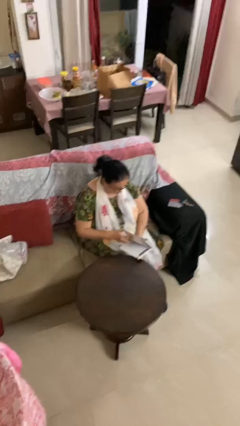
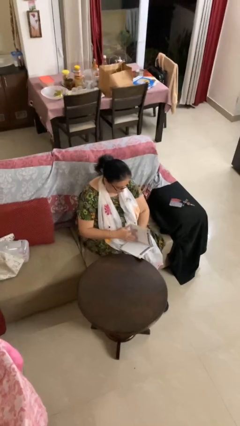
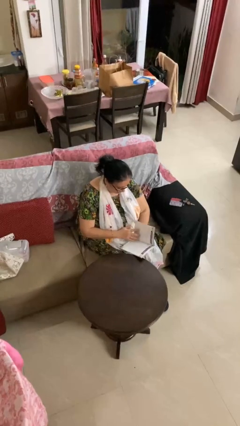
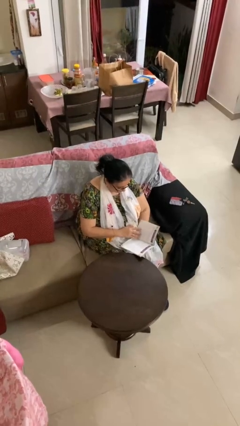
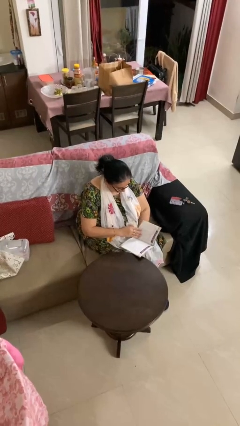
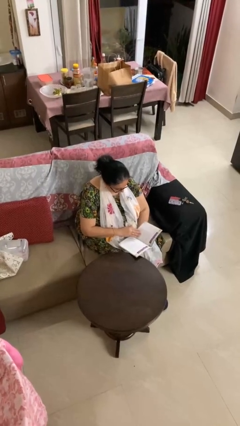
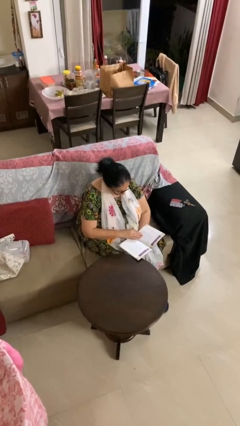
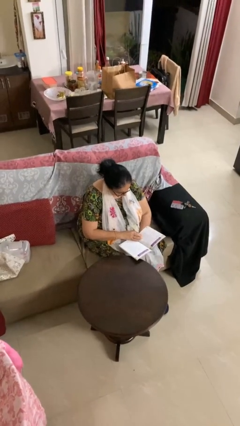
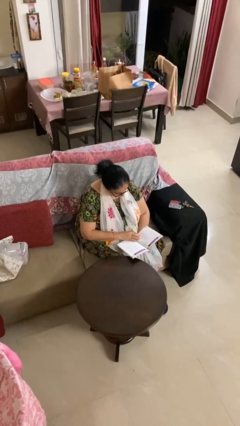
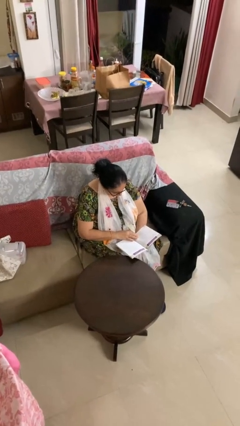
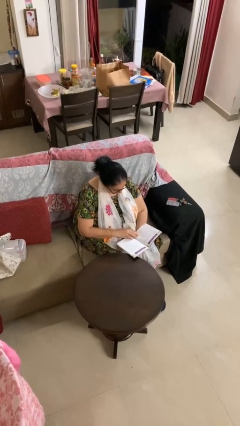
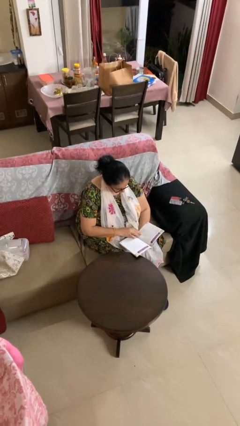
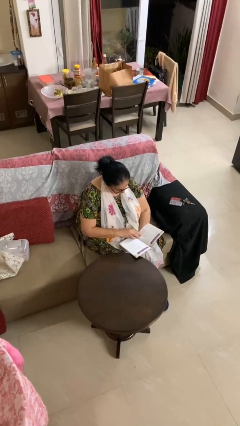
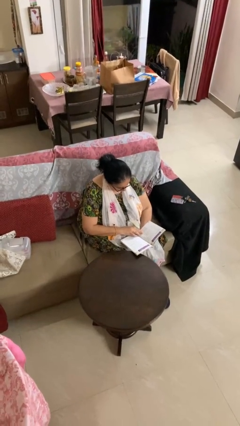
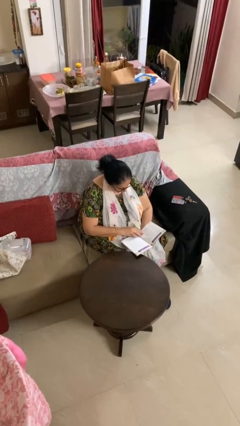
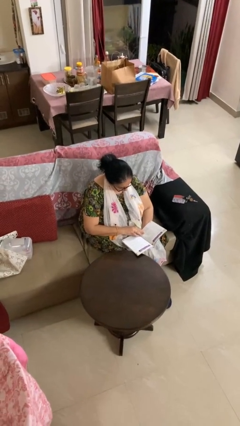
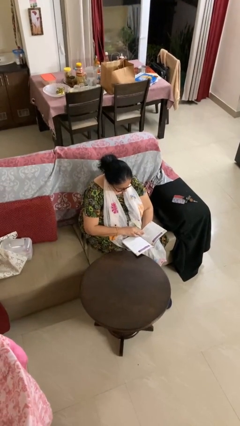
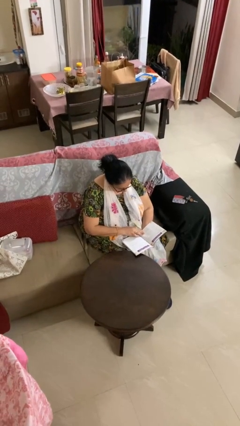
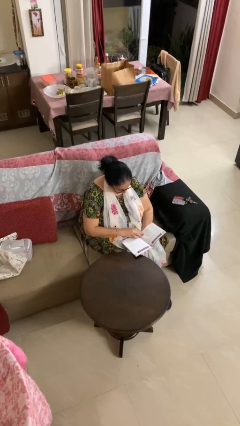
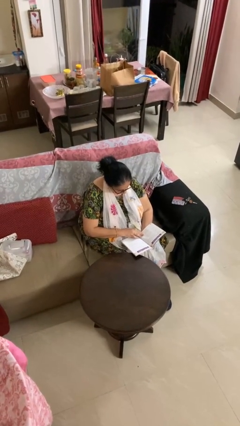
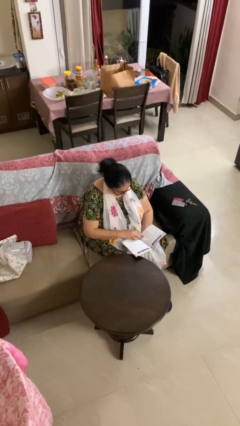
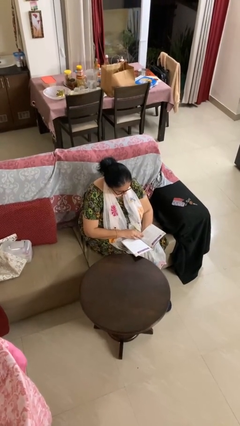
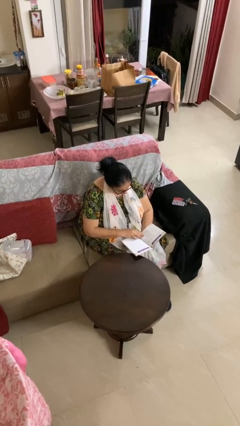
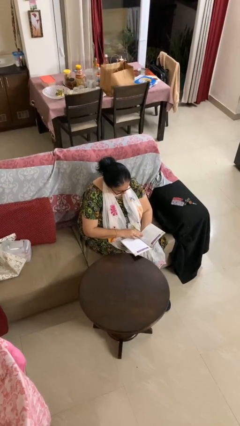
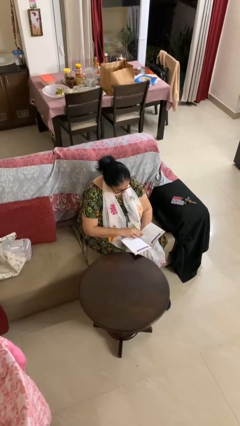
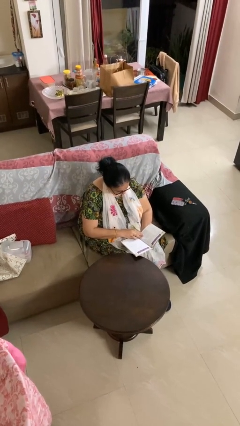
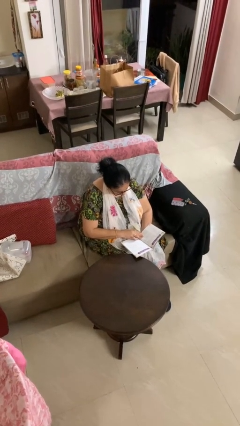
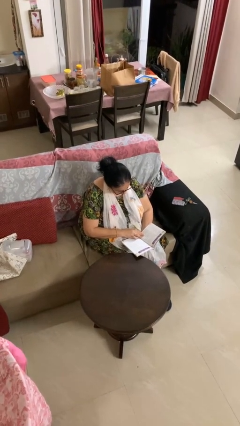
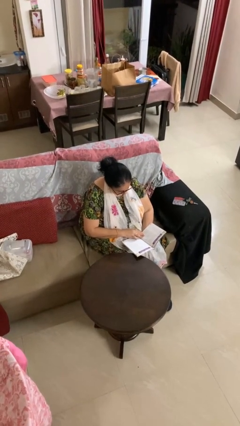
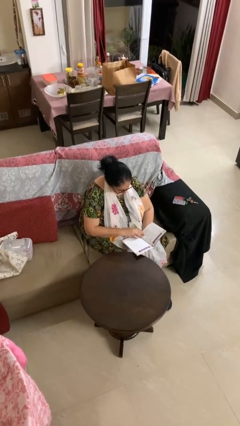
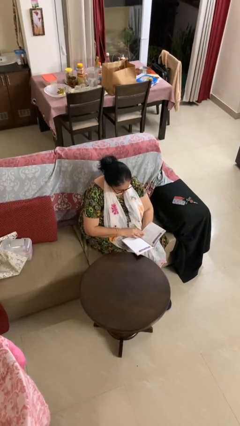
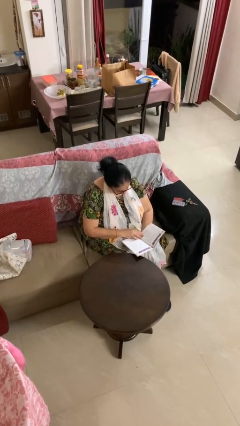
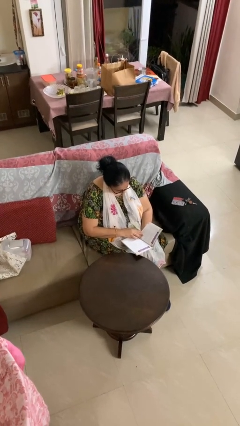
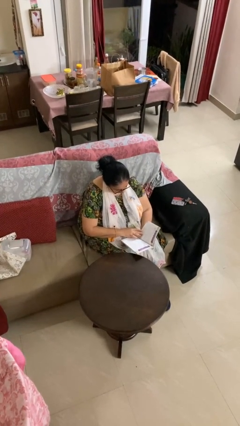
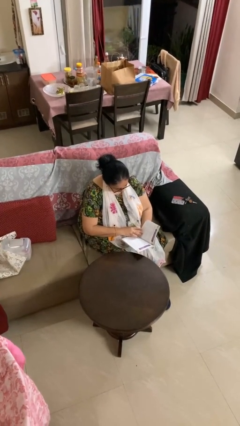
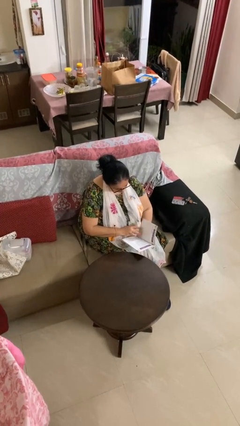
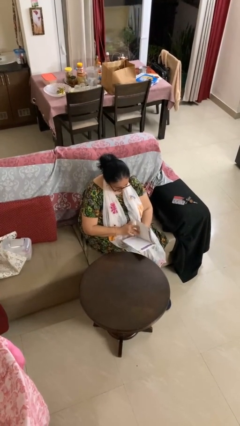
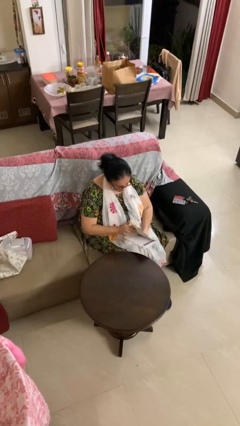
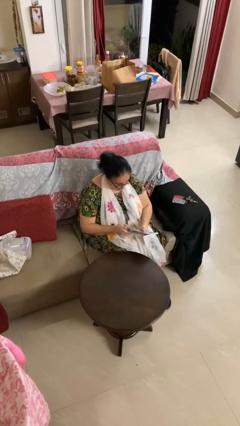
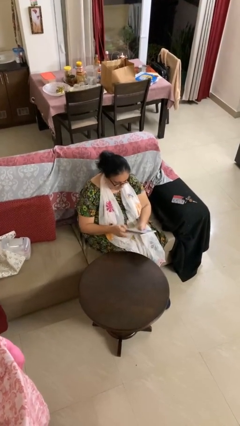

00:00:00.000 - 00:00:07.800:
person reads document

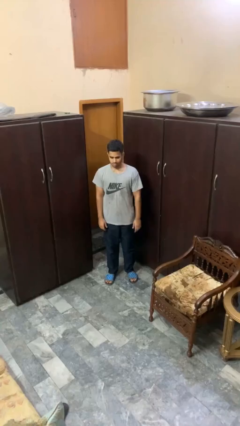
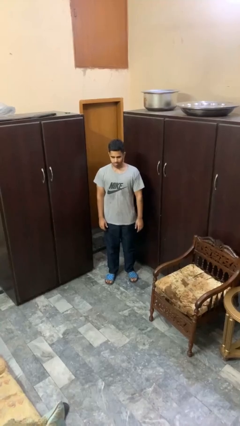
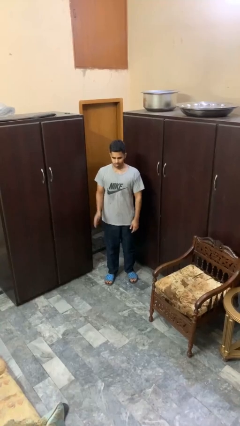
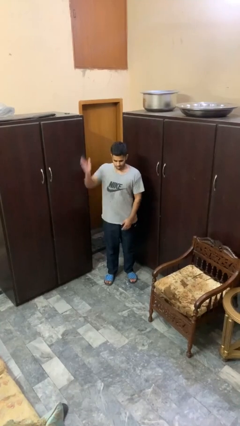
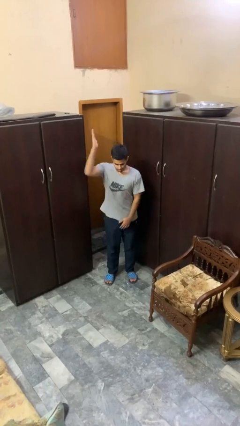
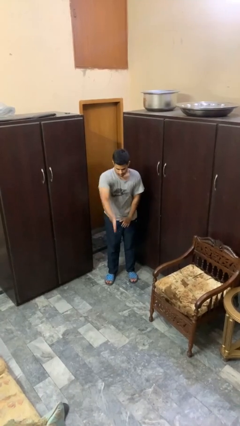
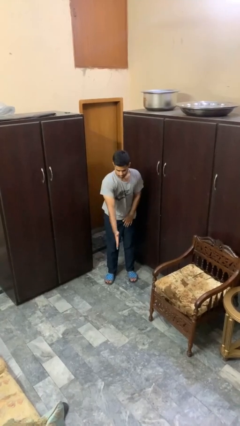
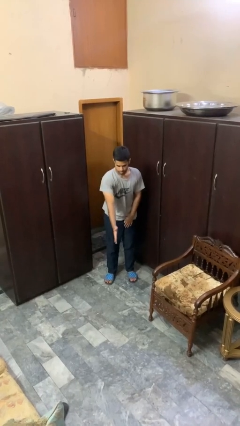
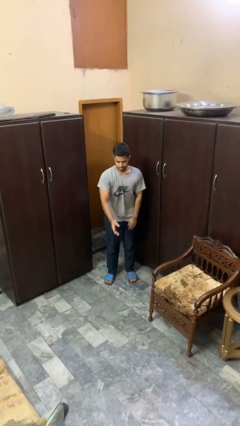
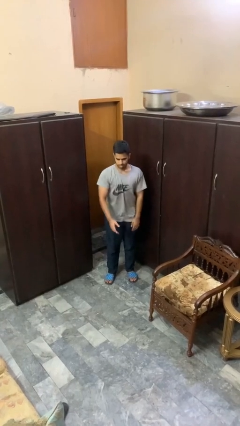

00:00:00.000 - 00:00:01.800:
person karate chop

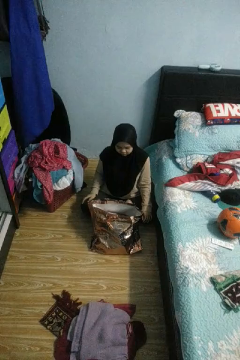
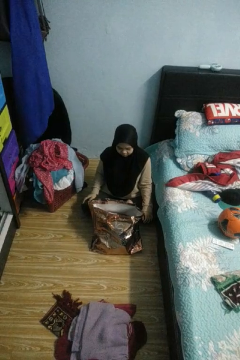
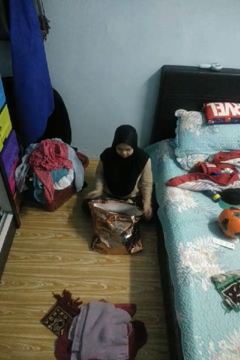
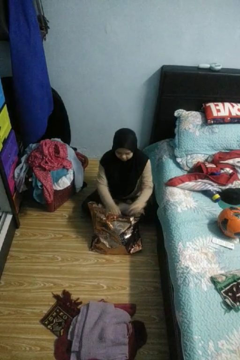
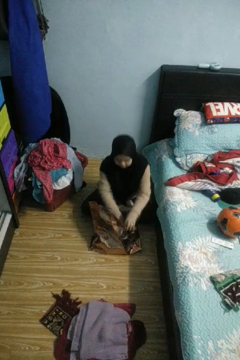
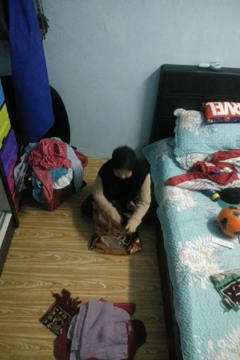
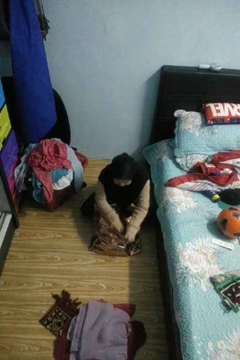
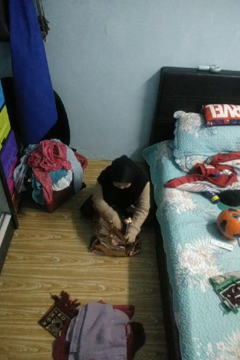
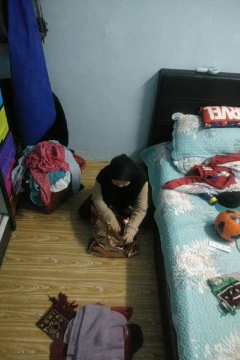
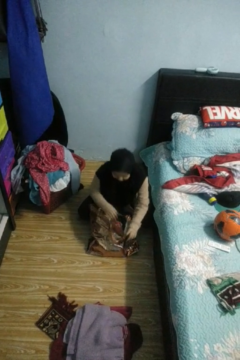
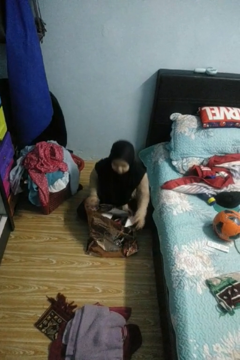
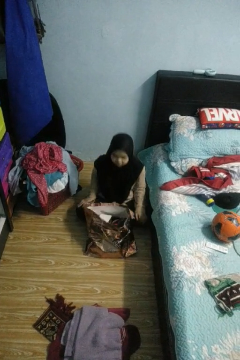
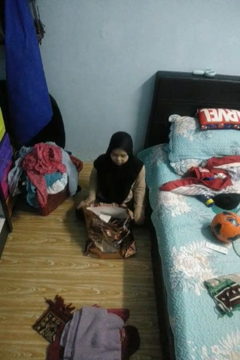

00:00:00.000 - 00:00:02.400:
person searches in bag

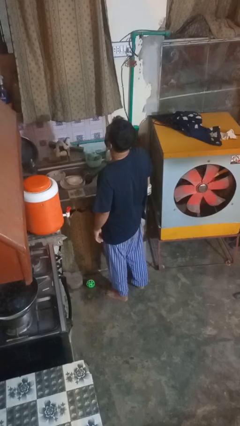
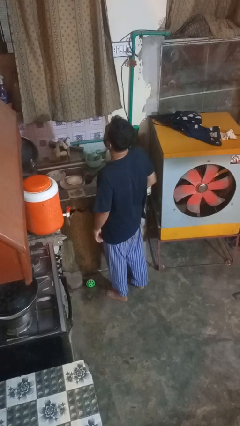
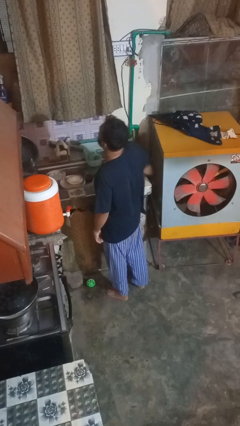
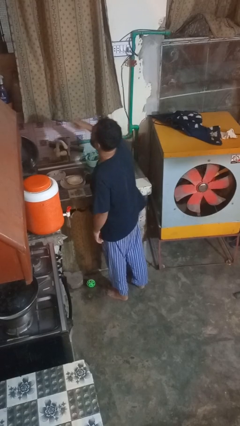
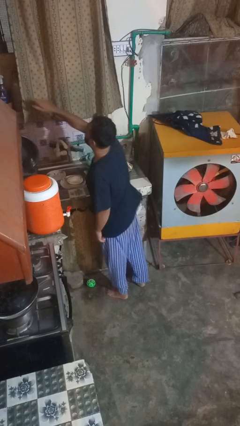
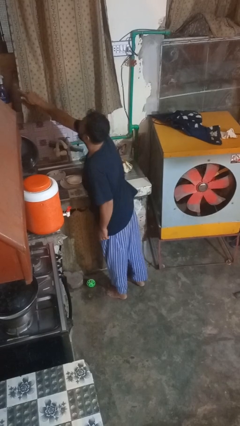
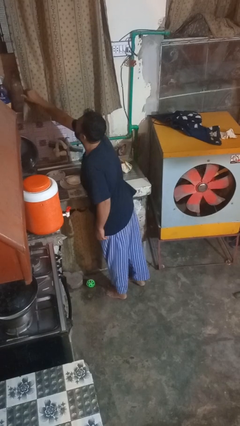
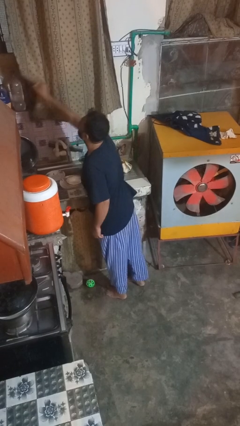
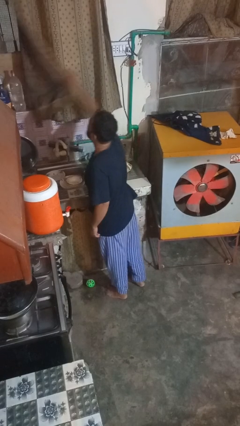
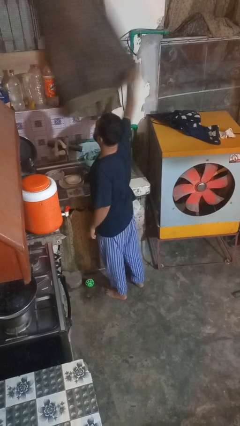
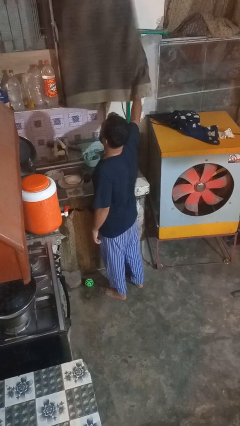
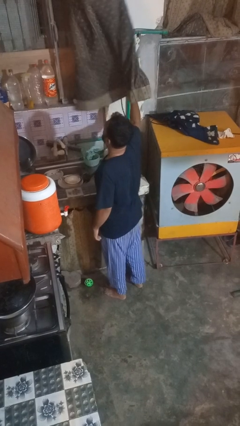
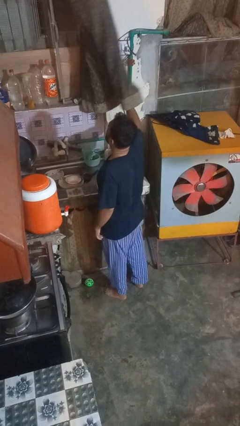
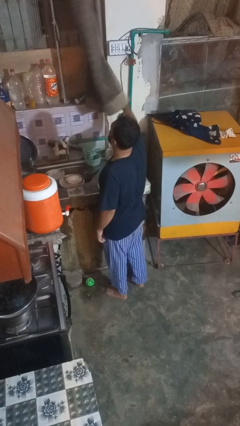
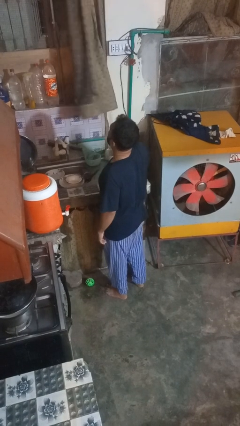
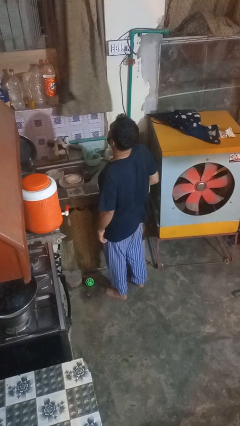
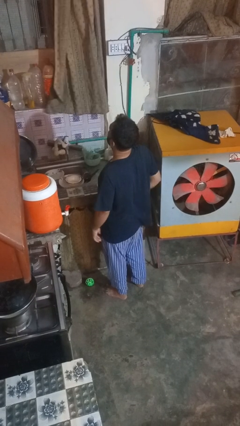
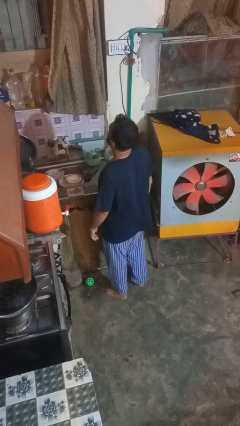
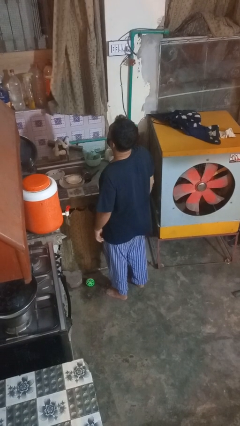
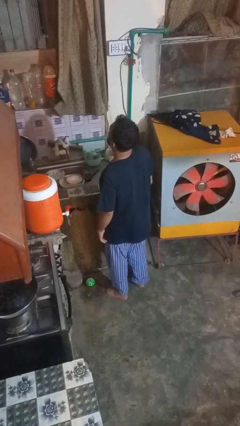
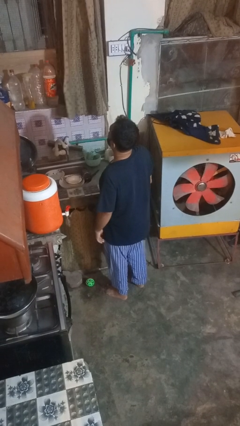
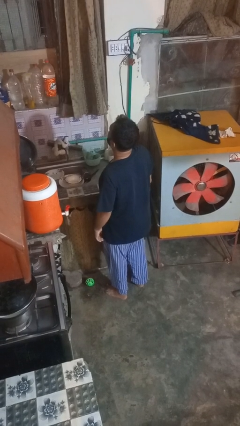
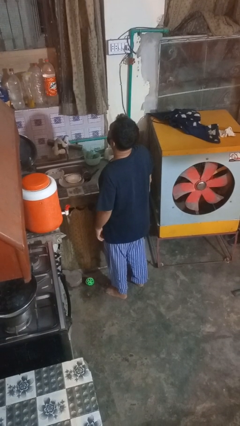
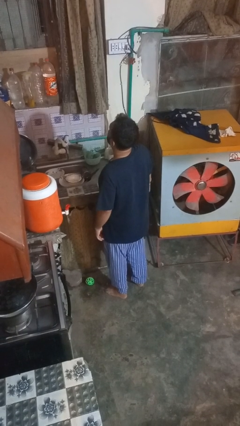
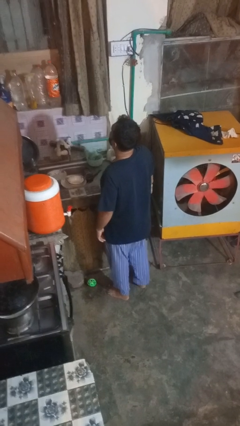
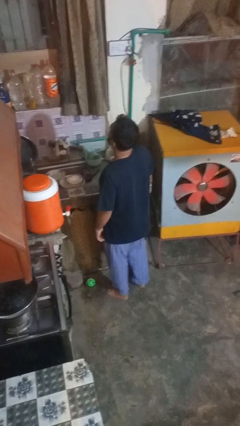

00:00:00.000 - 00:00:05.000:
person opens curtains

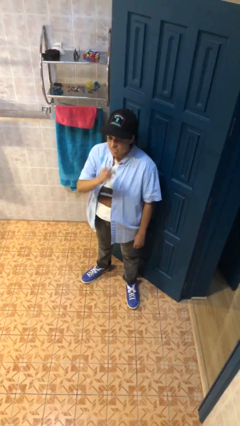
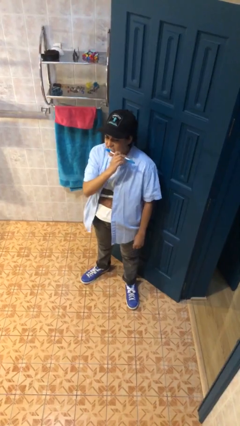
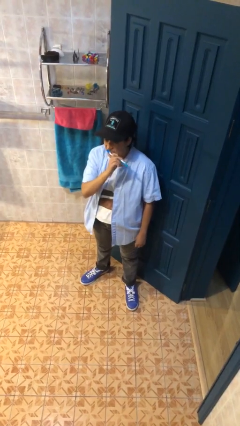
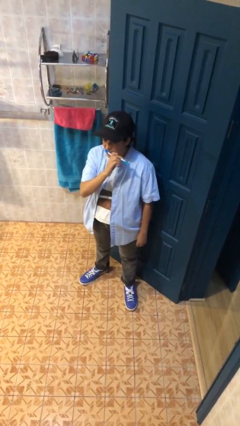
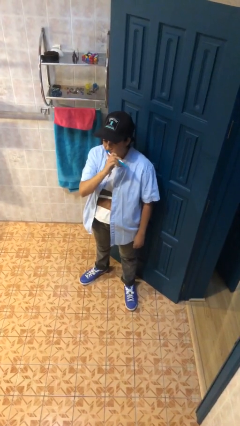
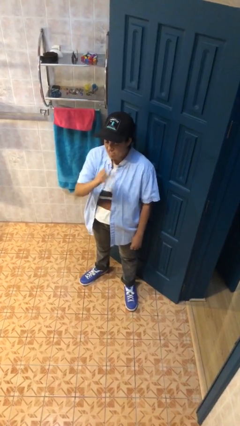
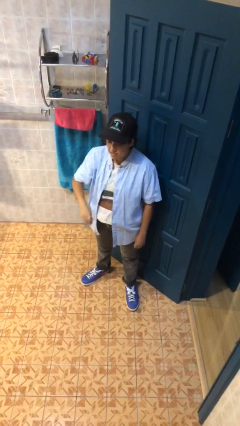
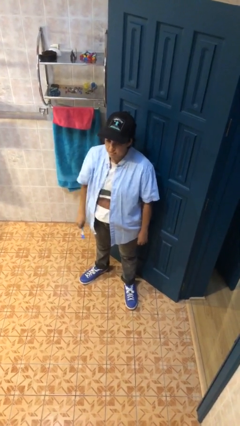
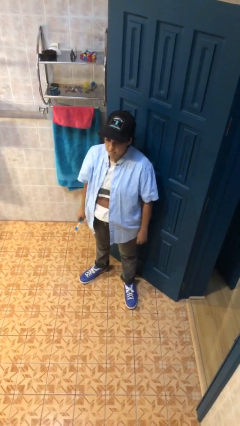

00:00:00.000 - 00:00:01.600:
person brushes teeth
